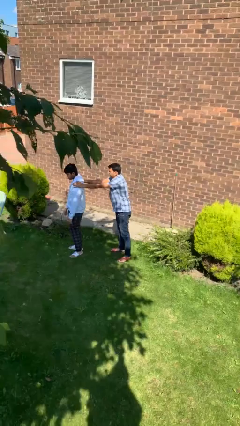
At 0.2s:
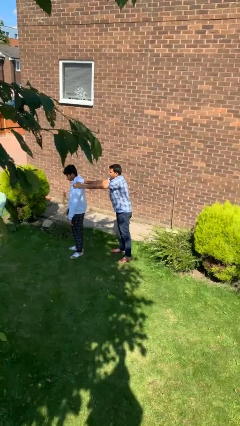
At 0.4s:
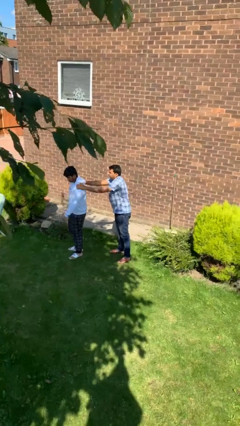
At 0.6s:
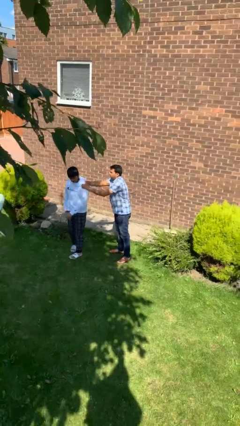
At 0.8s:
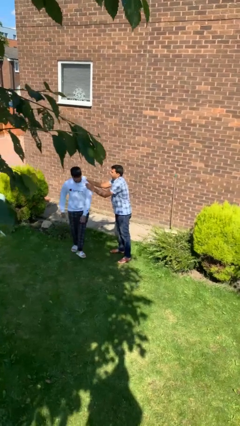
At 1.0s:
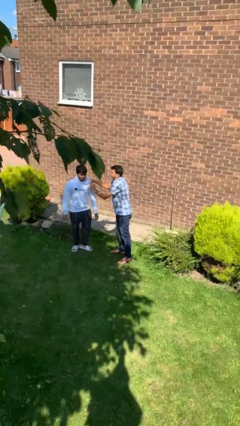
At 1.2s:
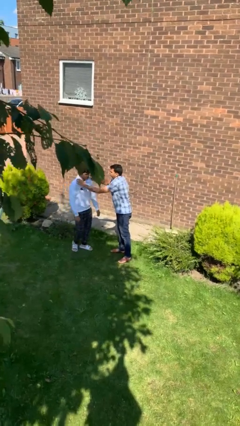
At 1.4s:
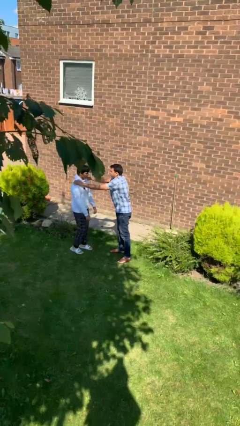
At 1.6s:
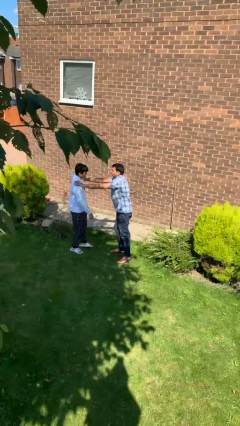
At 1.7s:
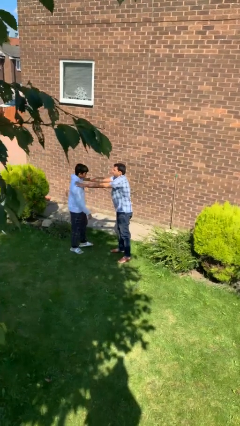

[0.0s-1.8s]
person spins person around

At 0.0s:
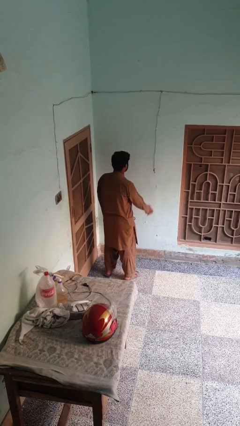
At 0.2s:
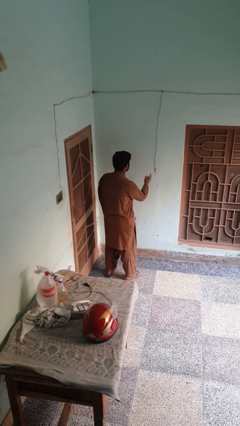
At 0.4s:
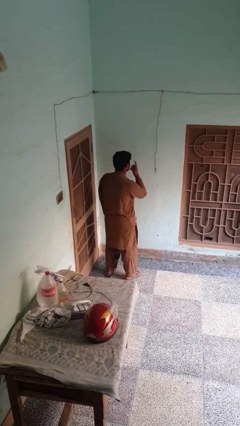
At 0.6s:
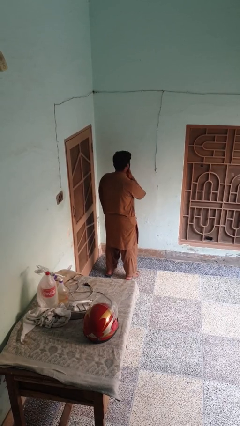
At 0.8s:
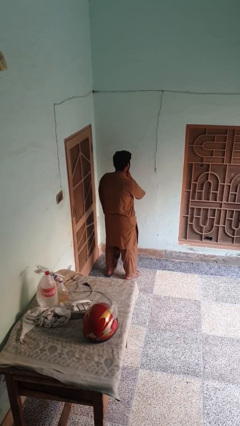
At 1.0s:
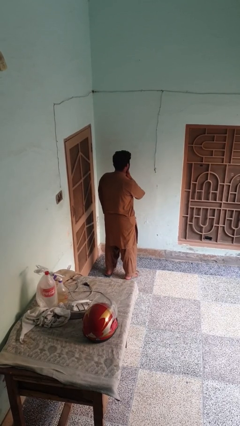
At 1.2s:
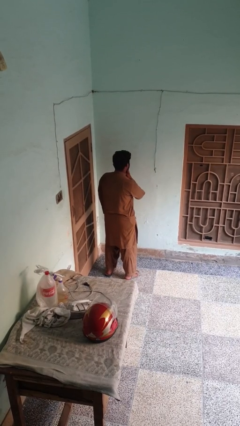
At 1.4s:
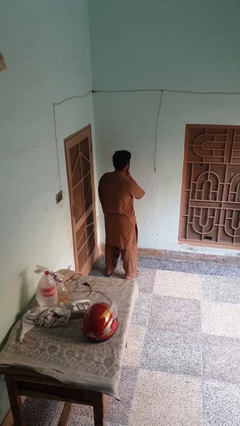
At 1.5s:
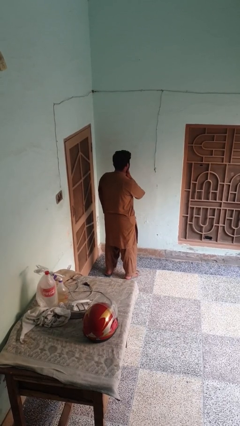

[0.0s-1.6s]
person gestures be quiet

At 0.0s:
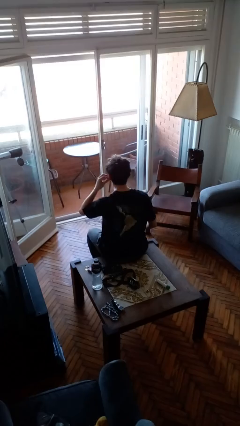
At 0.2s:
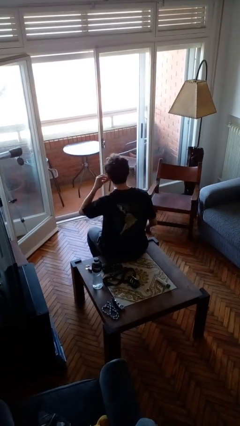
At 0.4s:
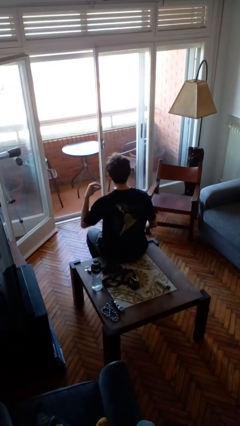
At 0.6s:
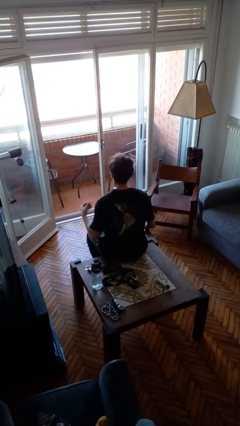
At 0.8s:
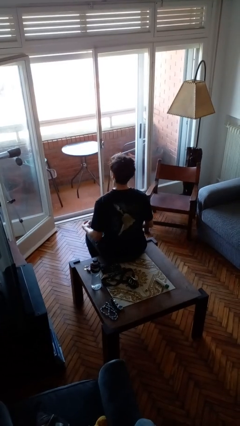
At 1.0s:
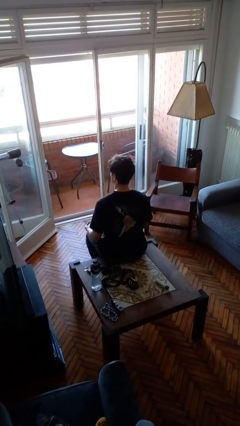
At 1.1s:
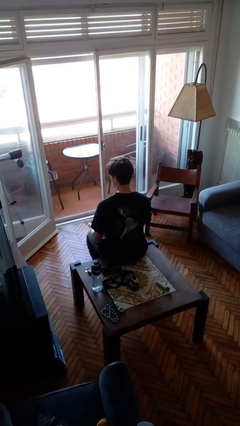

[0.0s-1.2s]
person takes off earrings

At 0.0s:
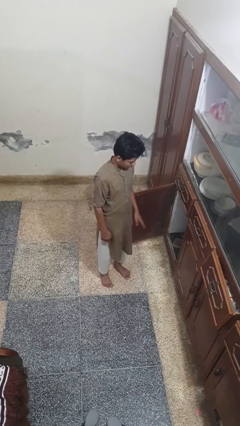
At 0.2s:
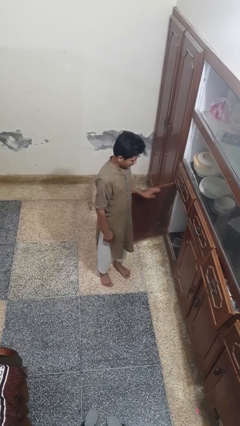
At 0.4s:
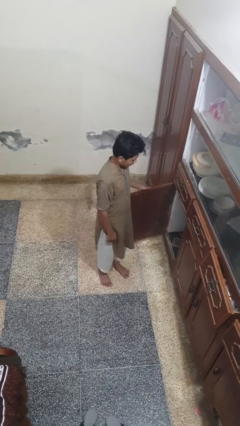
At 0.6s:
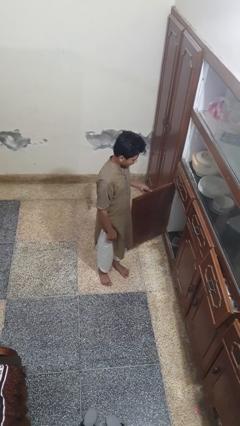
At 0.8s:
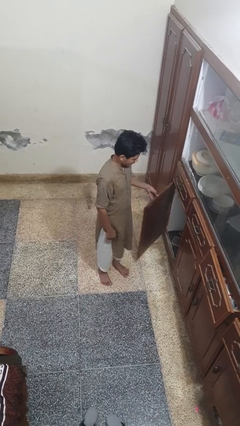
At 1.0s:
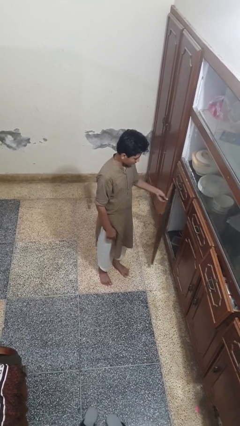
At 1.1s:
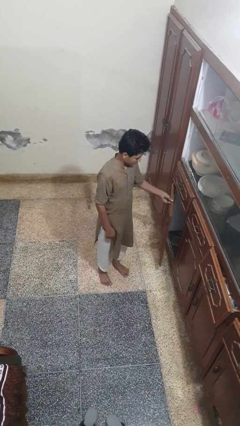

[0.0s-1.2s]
person closes cabinet

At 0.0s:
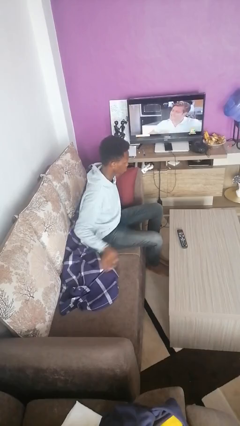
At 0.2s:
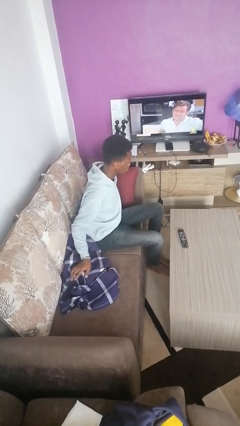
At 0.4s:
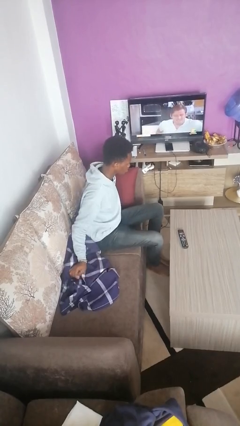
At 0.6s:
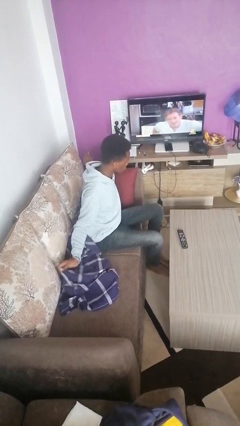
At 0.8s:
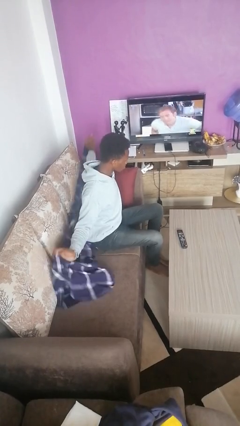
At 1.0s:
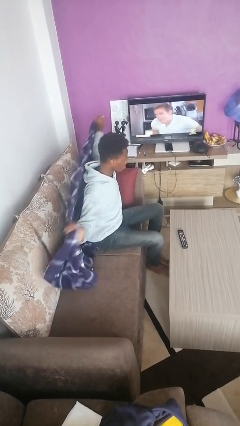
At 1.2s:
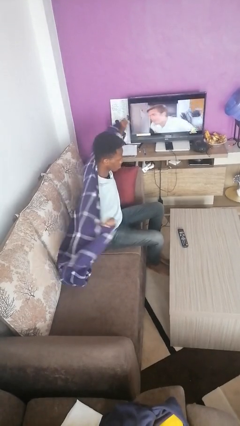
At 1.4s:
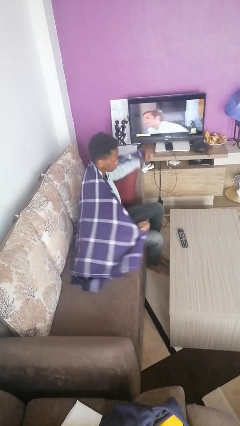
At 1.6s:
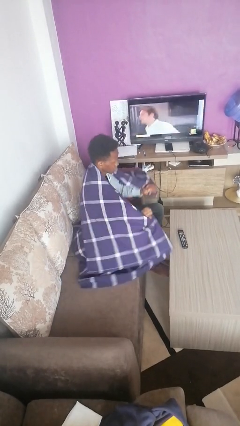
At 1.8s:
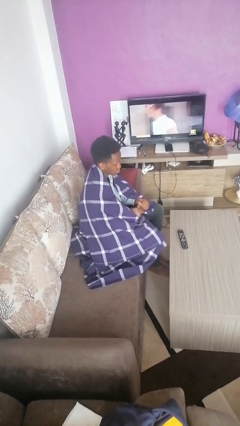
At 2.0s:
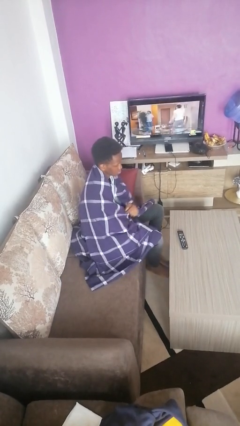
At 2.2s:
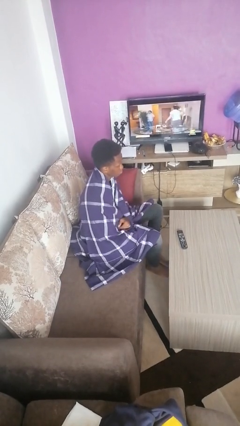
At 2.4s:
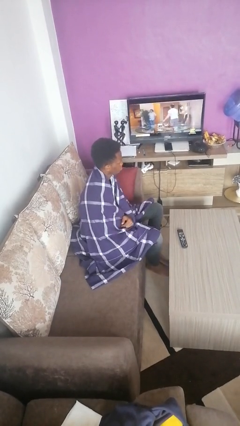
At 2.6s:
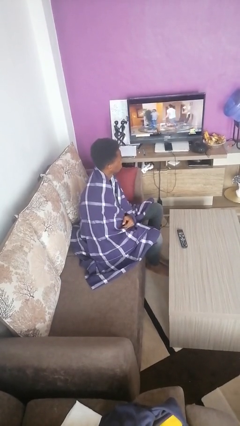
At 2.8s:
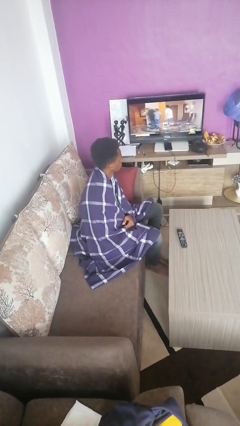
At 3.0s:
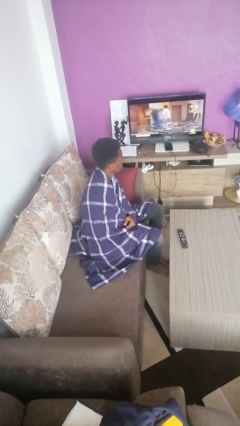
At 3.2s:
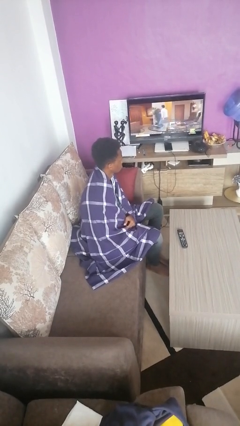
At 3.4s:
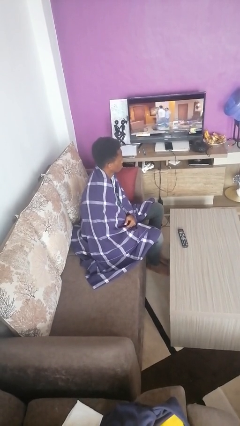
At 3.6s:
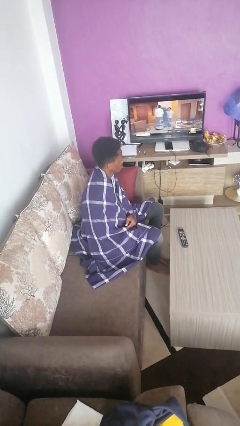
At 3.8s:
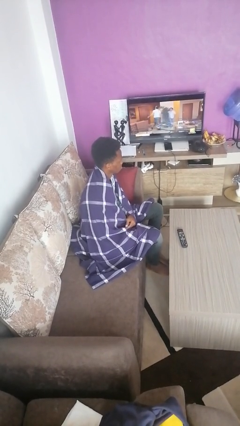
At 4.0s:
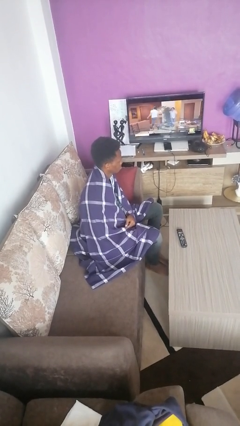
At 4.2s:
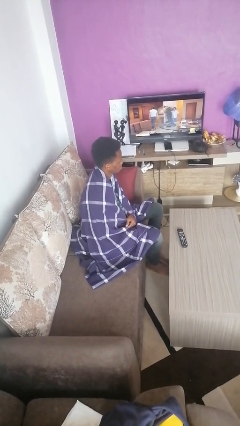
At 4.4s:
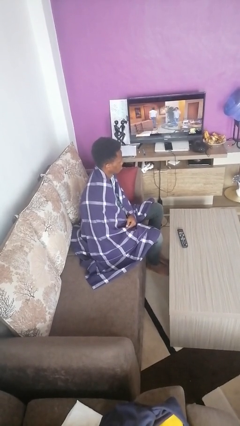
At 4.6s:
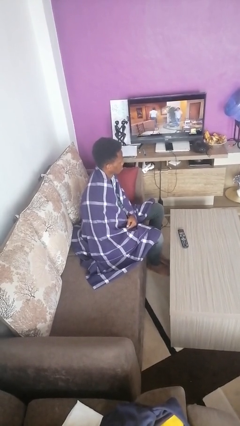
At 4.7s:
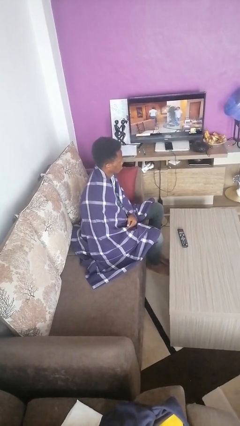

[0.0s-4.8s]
person covers with blanket

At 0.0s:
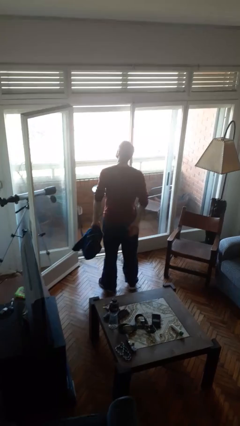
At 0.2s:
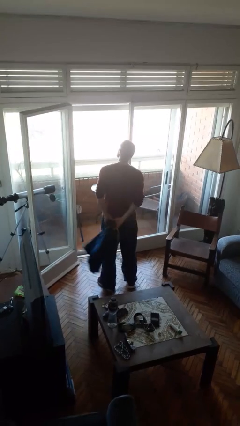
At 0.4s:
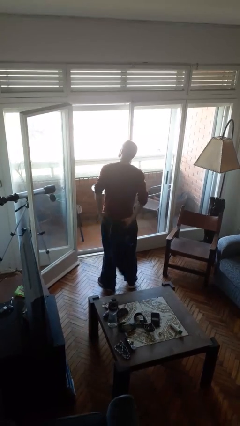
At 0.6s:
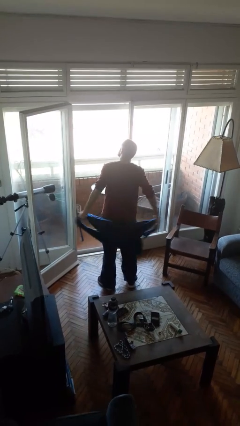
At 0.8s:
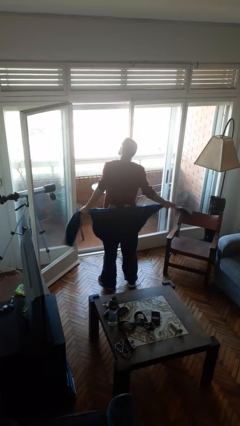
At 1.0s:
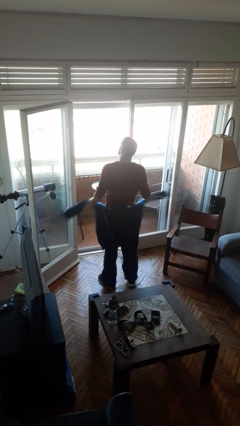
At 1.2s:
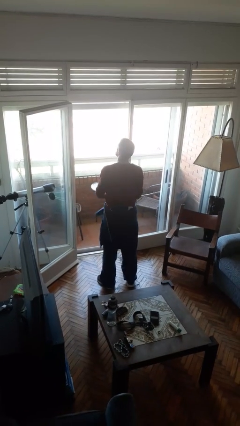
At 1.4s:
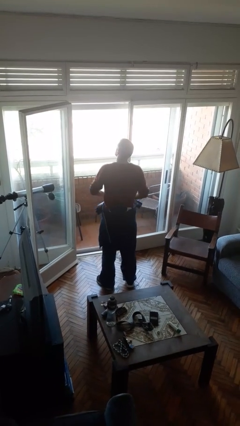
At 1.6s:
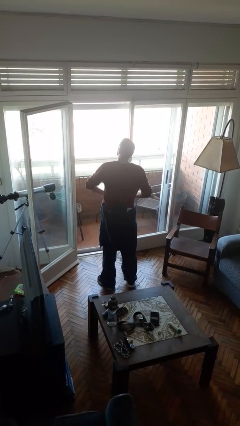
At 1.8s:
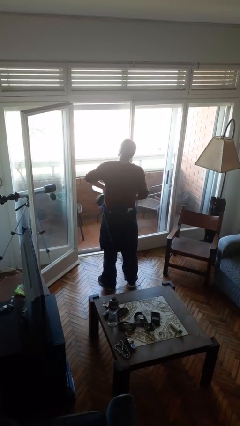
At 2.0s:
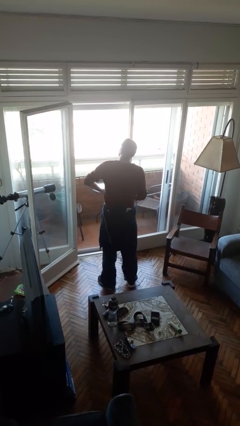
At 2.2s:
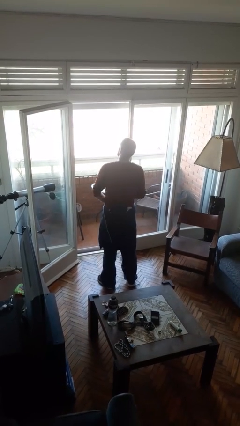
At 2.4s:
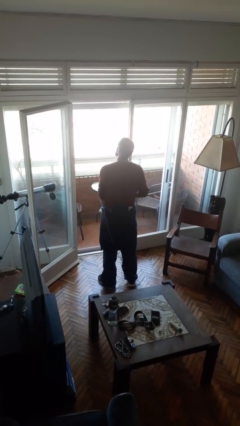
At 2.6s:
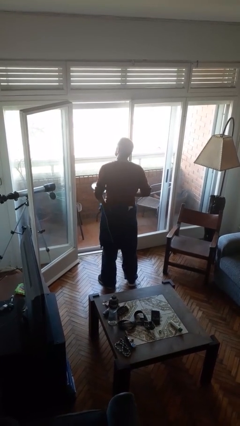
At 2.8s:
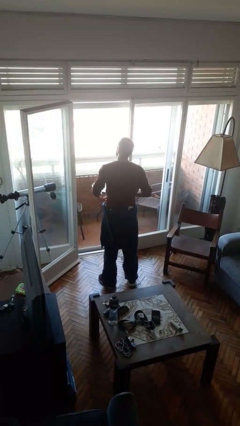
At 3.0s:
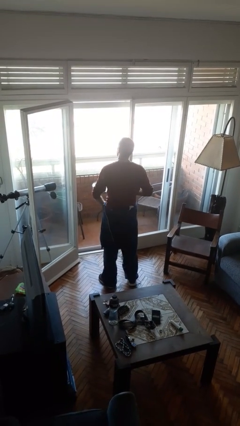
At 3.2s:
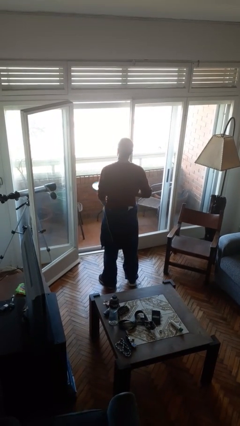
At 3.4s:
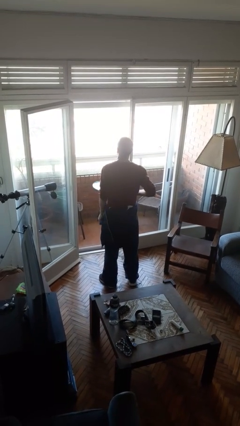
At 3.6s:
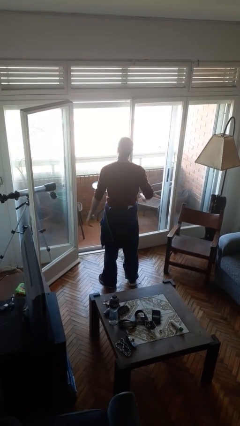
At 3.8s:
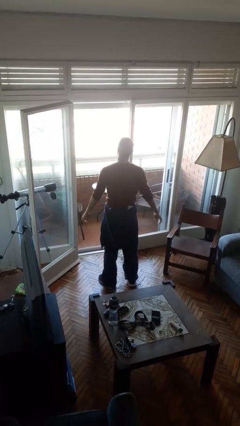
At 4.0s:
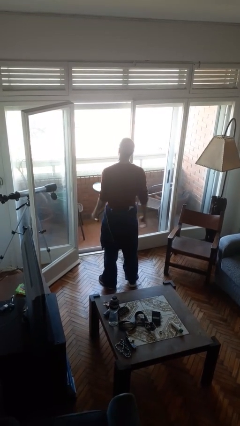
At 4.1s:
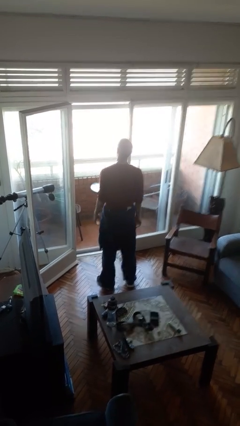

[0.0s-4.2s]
person ties jacket around waist

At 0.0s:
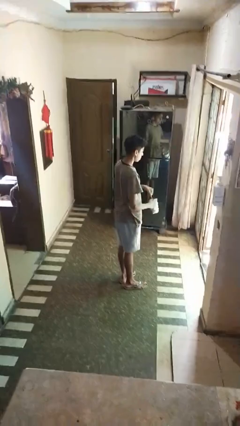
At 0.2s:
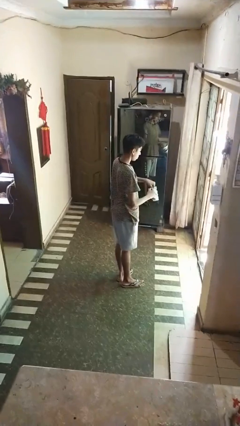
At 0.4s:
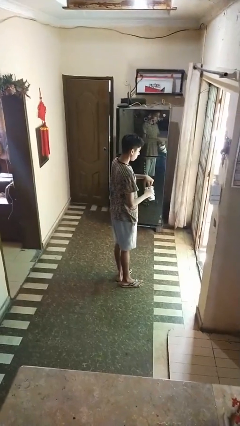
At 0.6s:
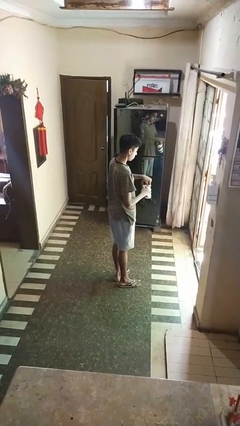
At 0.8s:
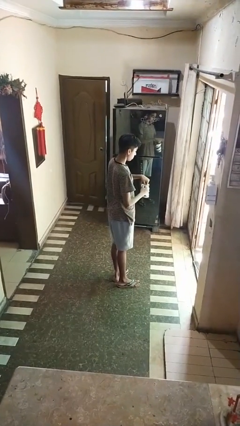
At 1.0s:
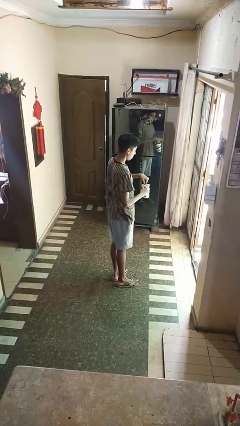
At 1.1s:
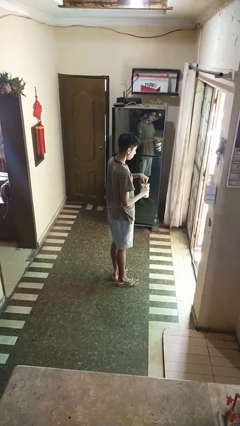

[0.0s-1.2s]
person stirs mug

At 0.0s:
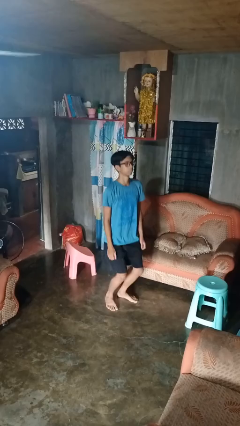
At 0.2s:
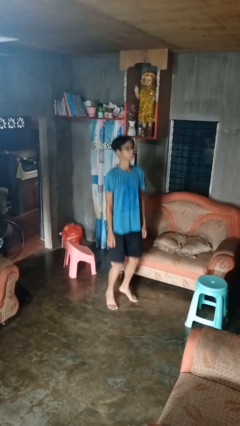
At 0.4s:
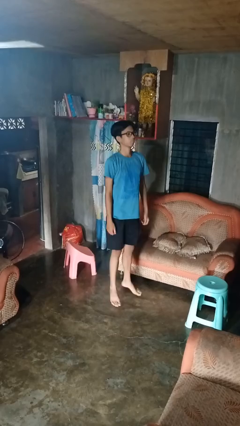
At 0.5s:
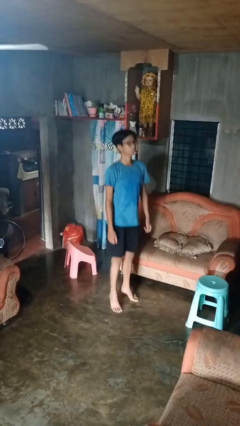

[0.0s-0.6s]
person jumps

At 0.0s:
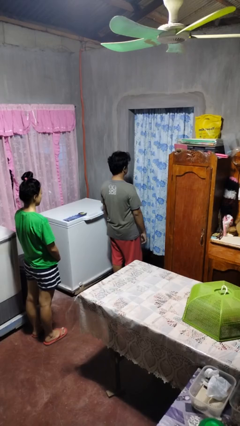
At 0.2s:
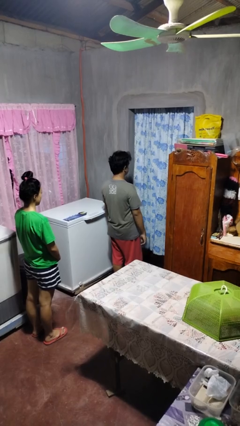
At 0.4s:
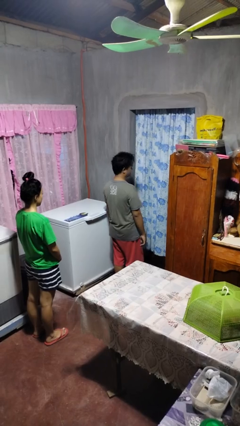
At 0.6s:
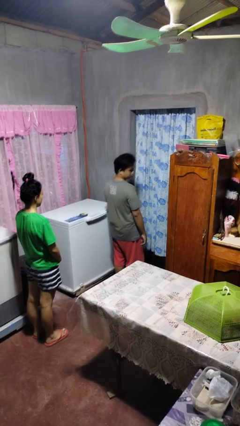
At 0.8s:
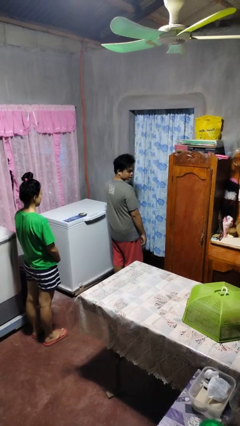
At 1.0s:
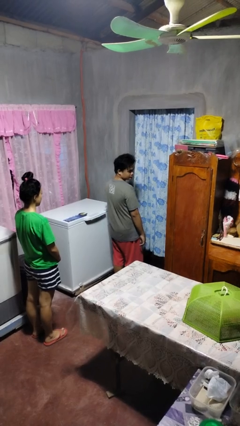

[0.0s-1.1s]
person looks over shoulder
